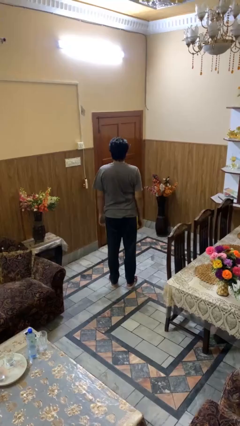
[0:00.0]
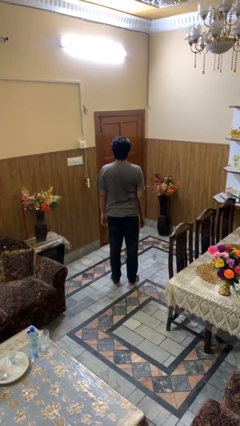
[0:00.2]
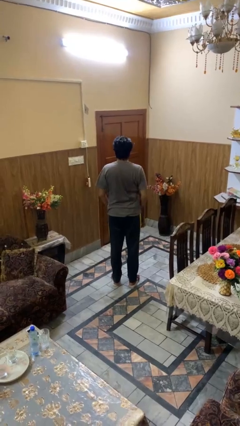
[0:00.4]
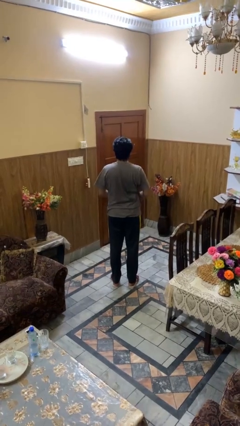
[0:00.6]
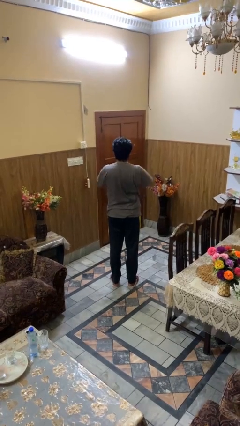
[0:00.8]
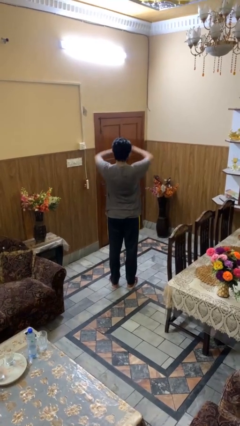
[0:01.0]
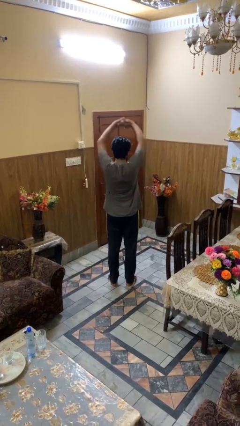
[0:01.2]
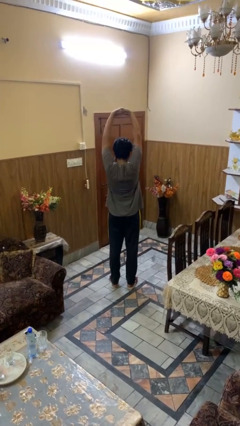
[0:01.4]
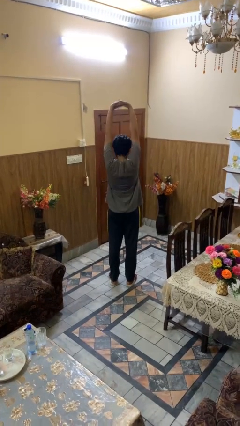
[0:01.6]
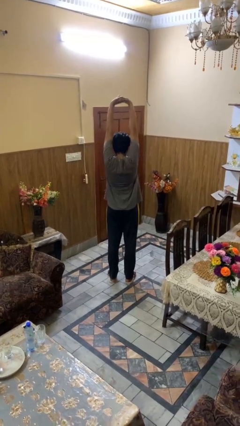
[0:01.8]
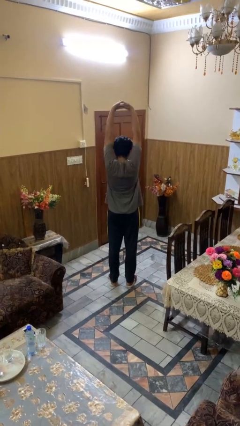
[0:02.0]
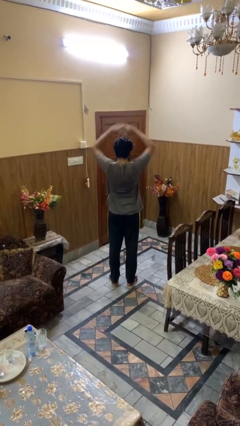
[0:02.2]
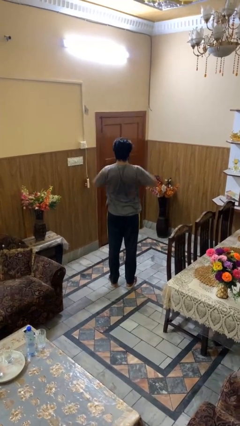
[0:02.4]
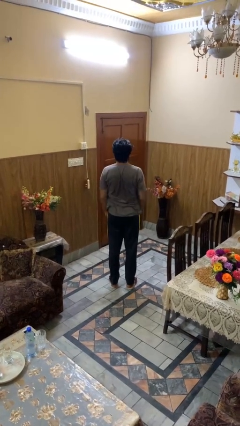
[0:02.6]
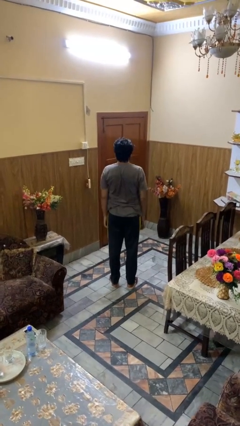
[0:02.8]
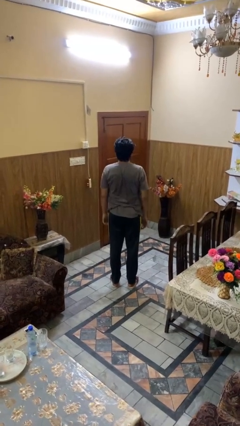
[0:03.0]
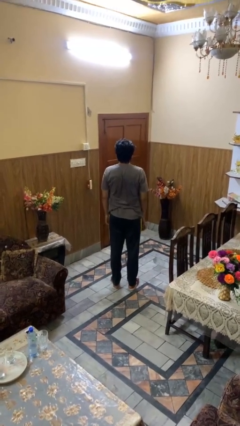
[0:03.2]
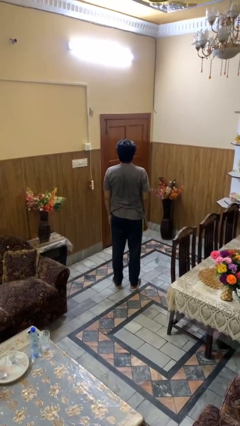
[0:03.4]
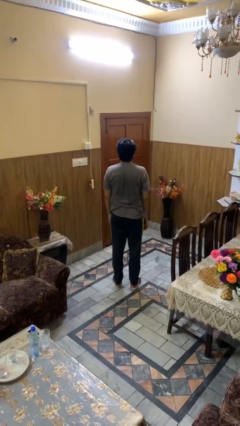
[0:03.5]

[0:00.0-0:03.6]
person stretches arms over head

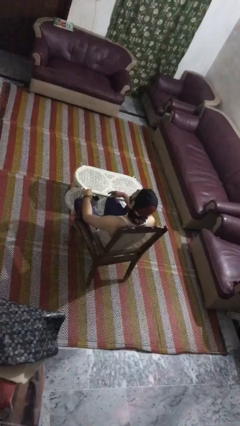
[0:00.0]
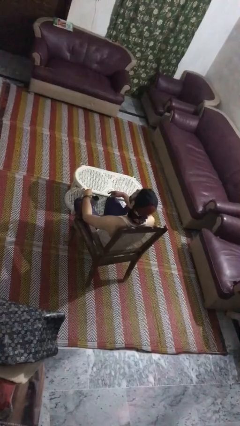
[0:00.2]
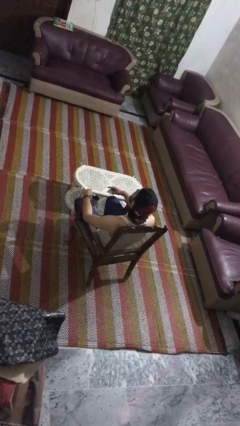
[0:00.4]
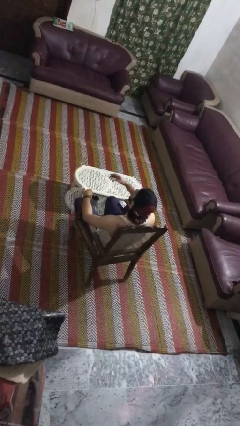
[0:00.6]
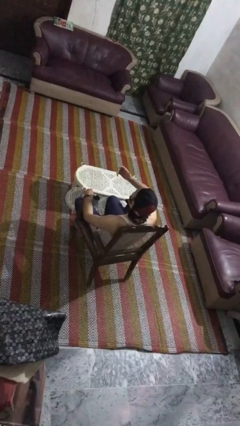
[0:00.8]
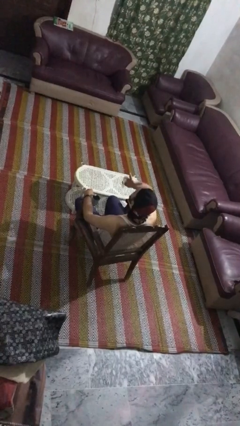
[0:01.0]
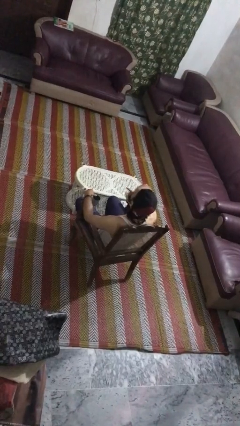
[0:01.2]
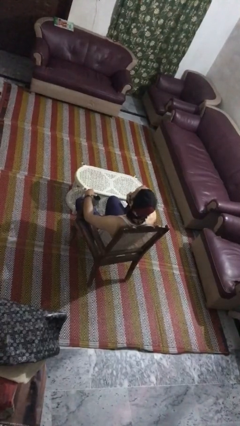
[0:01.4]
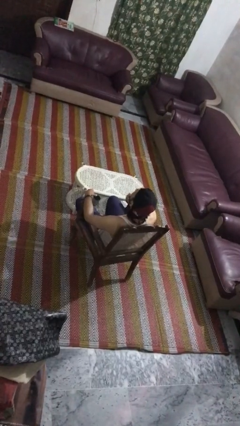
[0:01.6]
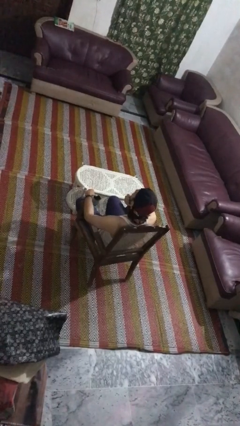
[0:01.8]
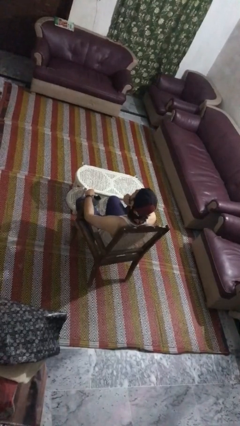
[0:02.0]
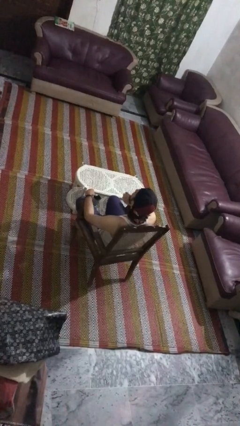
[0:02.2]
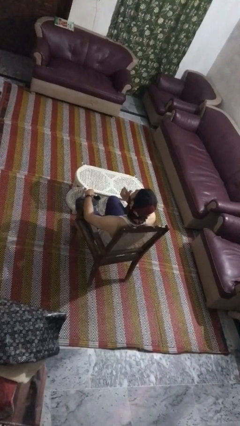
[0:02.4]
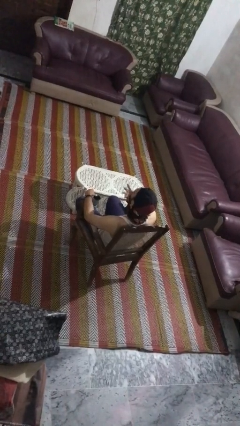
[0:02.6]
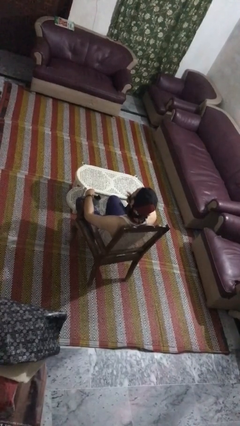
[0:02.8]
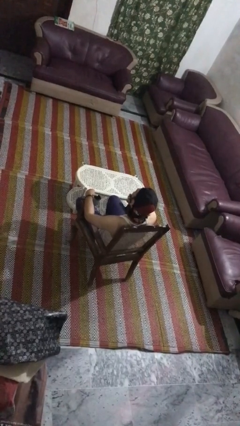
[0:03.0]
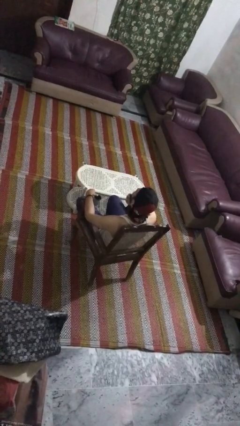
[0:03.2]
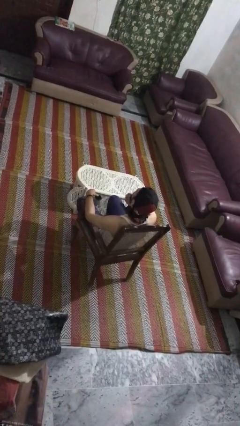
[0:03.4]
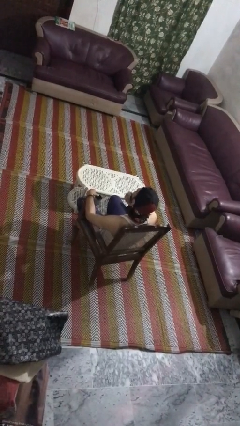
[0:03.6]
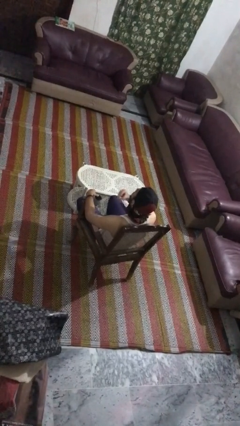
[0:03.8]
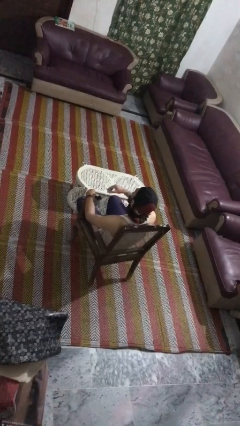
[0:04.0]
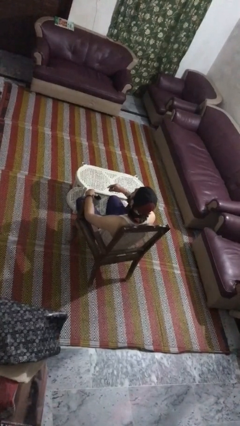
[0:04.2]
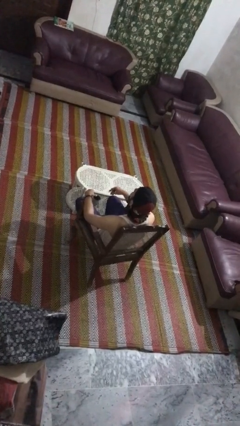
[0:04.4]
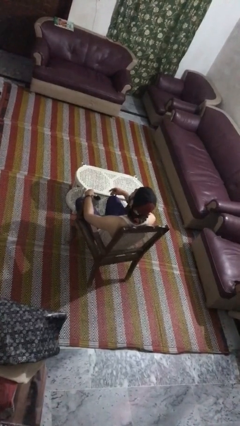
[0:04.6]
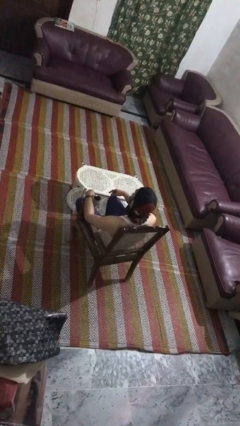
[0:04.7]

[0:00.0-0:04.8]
person strokes chin

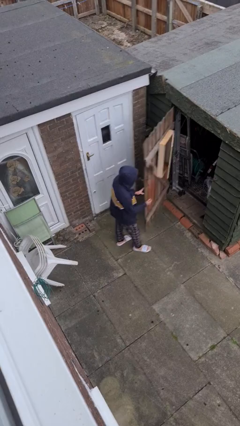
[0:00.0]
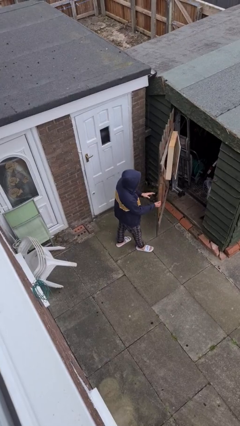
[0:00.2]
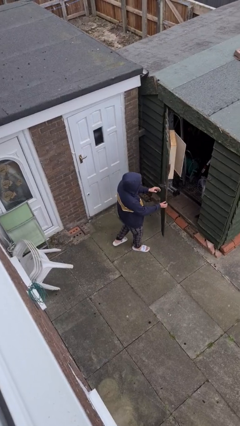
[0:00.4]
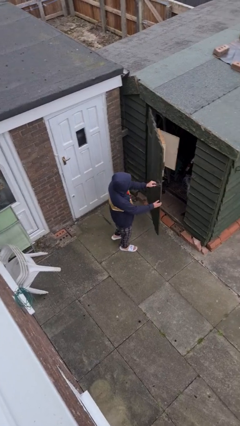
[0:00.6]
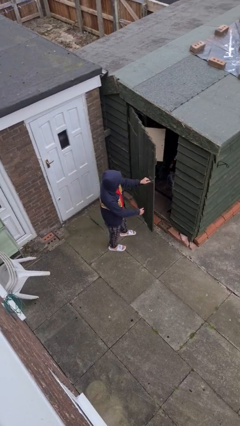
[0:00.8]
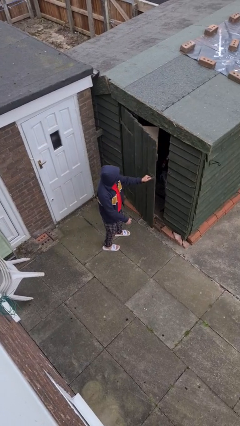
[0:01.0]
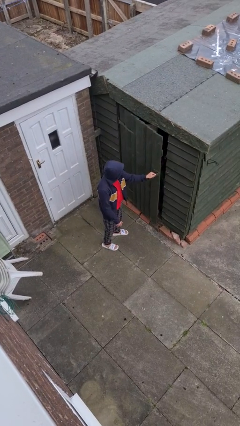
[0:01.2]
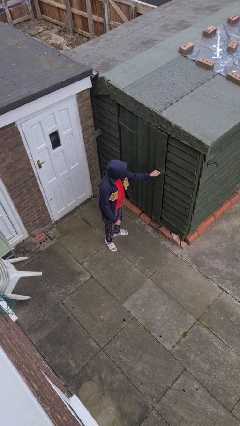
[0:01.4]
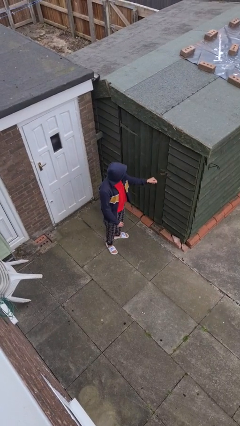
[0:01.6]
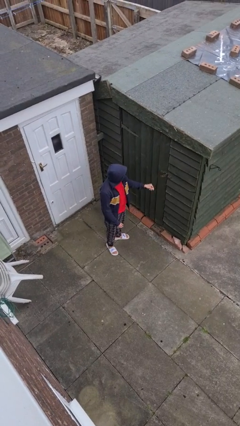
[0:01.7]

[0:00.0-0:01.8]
person closes facility door

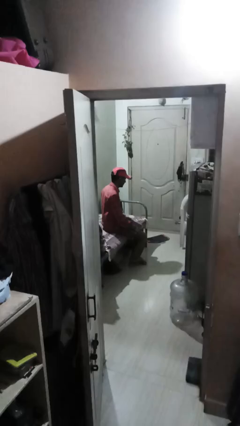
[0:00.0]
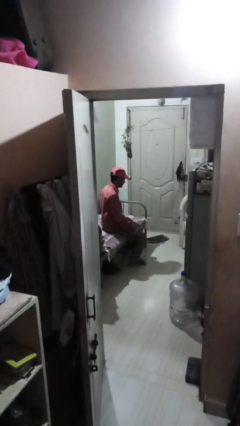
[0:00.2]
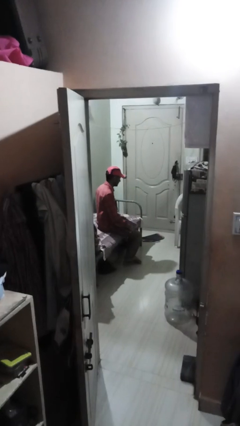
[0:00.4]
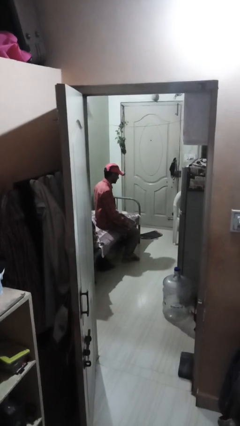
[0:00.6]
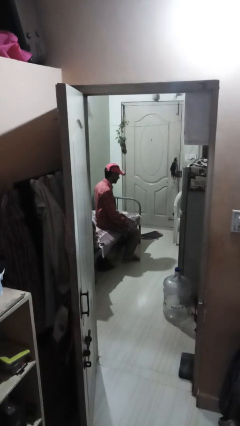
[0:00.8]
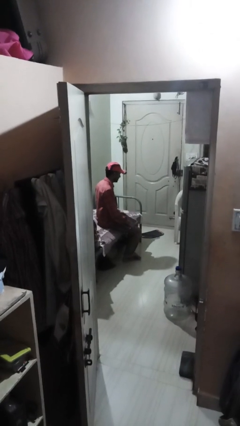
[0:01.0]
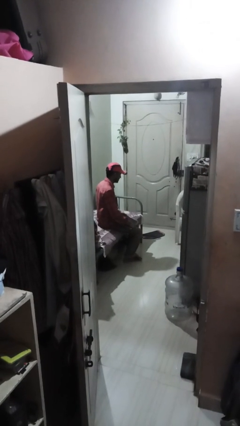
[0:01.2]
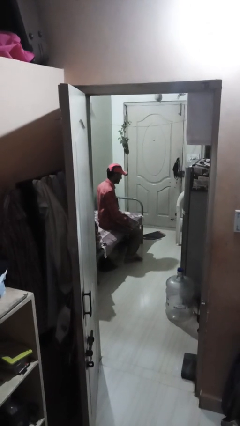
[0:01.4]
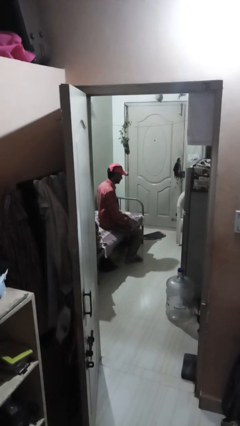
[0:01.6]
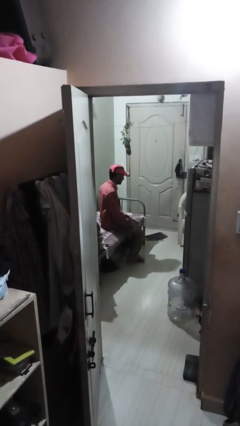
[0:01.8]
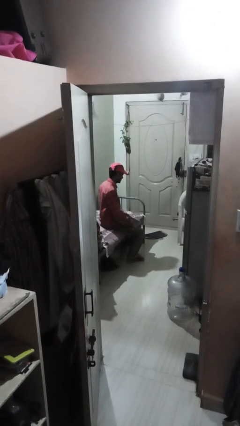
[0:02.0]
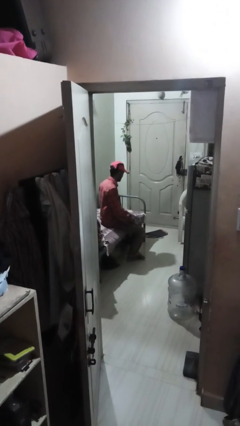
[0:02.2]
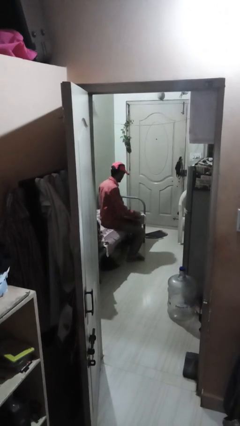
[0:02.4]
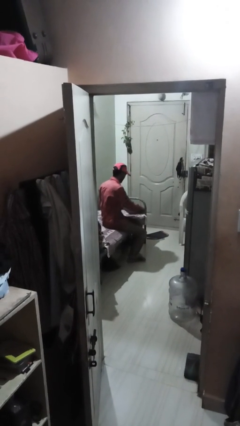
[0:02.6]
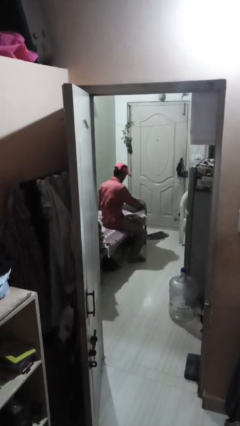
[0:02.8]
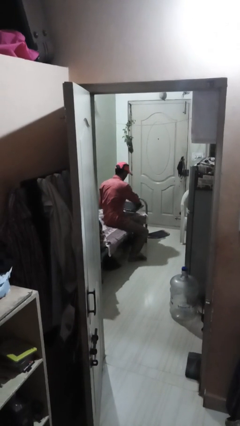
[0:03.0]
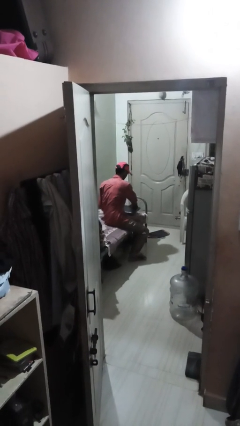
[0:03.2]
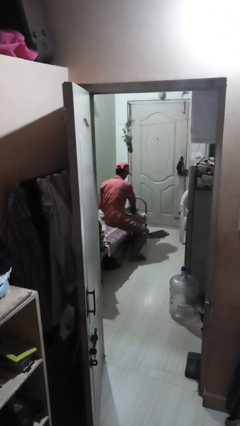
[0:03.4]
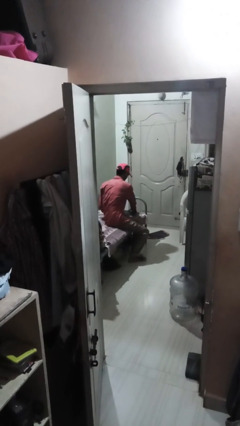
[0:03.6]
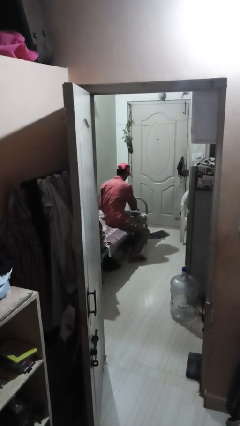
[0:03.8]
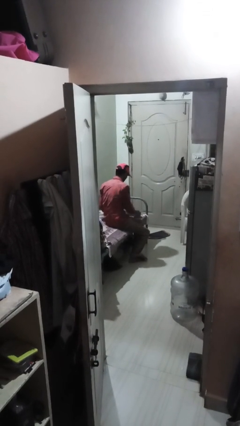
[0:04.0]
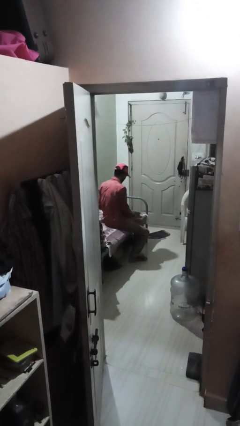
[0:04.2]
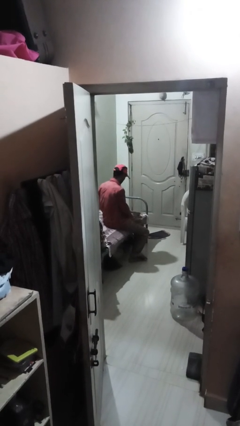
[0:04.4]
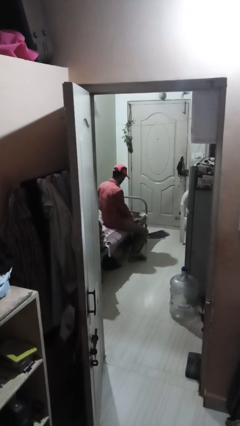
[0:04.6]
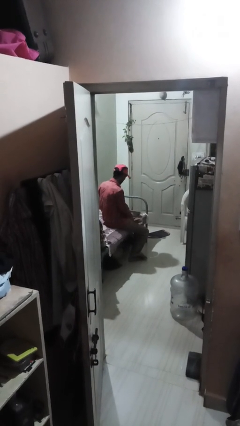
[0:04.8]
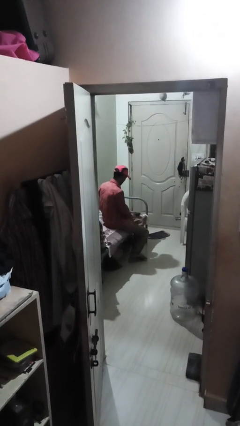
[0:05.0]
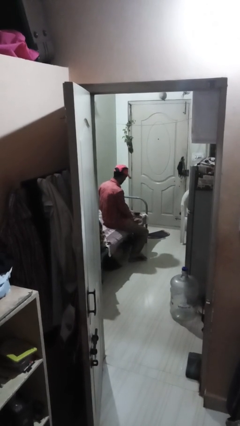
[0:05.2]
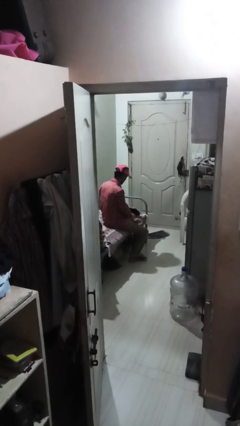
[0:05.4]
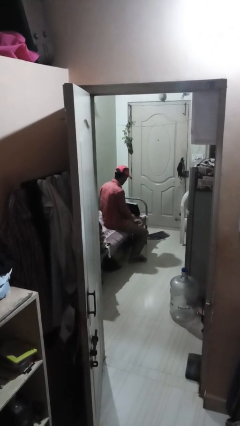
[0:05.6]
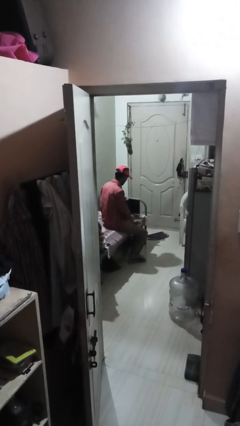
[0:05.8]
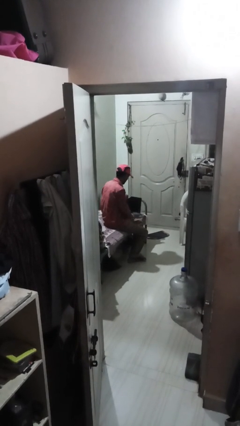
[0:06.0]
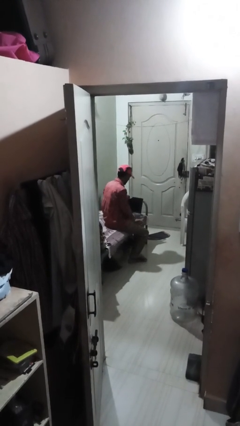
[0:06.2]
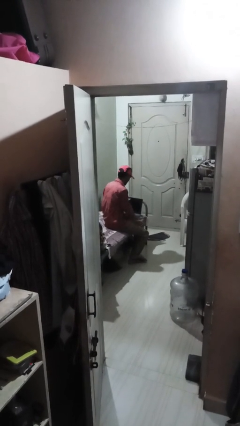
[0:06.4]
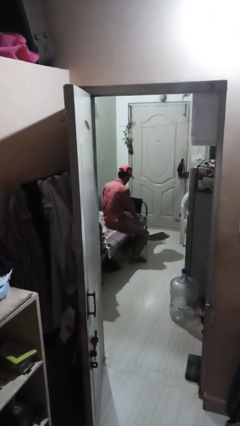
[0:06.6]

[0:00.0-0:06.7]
person opens laptop

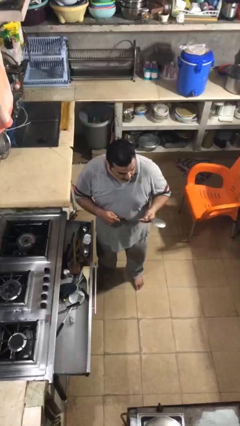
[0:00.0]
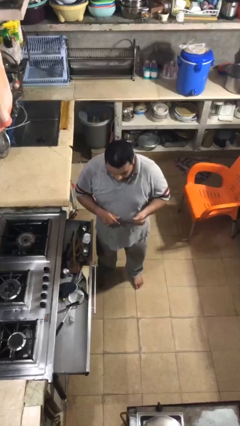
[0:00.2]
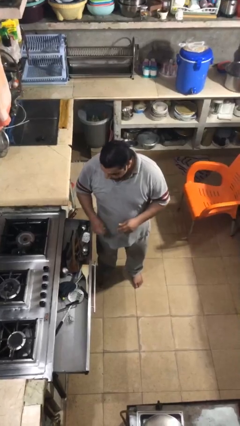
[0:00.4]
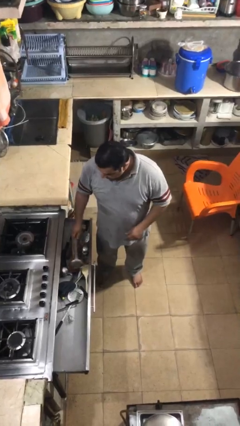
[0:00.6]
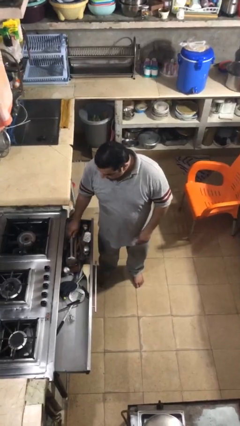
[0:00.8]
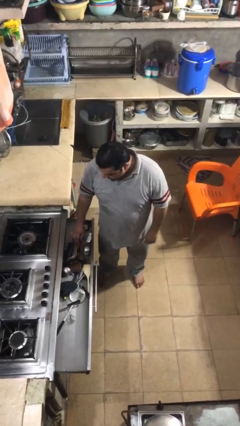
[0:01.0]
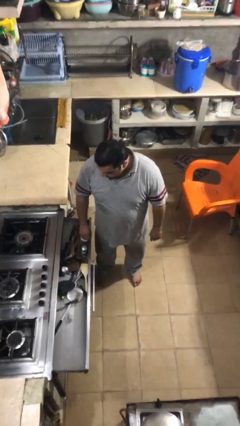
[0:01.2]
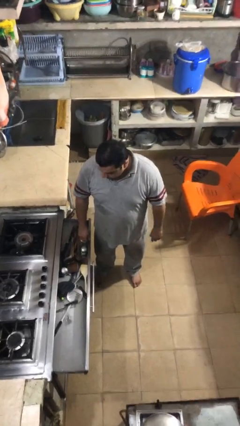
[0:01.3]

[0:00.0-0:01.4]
person puts object into kitchen drawer
